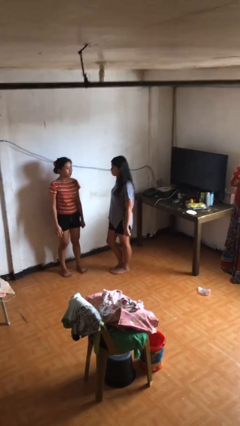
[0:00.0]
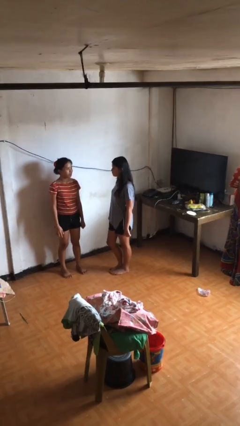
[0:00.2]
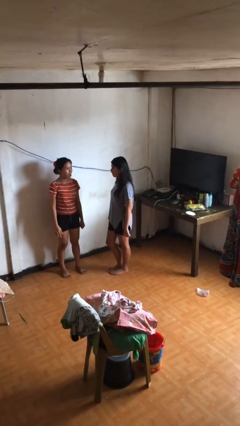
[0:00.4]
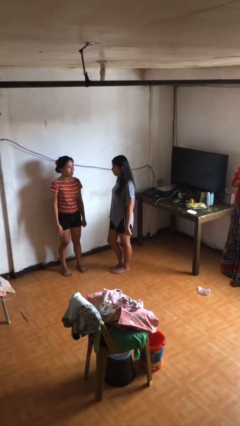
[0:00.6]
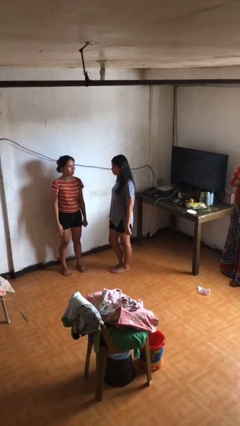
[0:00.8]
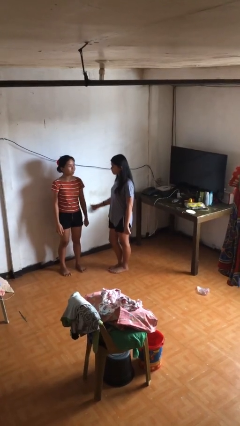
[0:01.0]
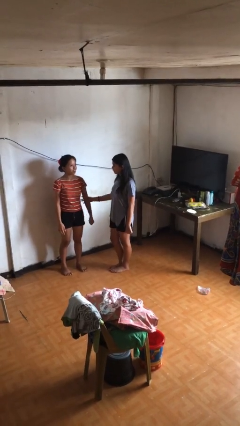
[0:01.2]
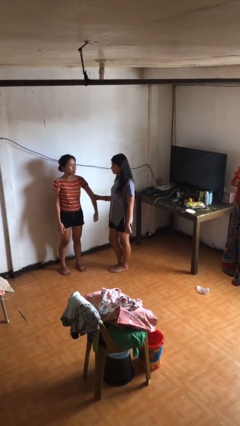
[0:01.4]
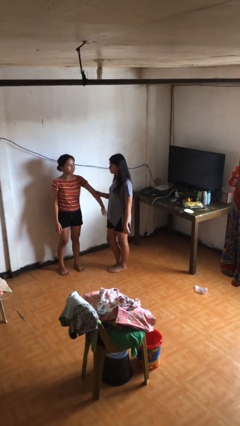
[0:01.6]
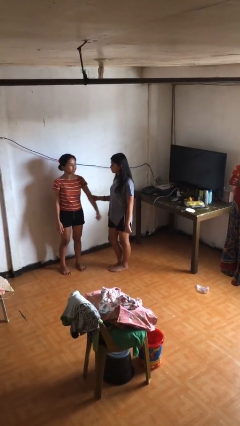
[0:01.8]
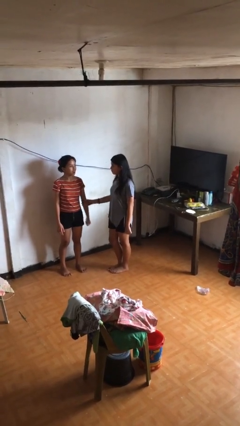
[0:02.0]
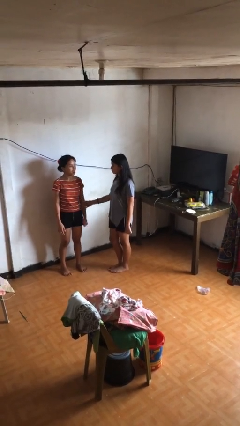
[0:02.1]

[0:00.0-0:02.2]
person grabs person by forearm

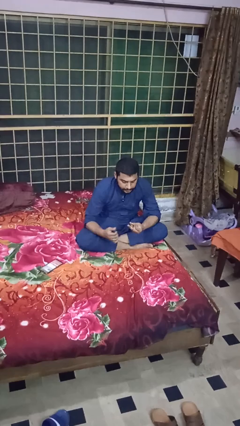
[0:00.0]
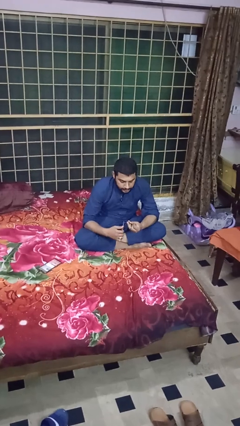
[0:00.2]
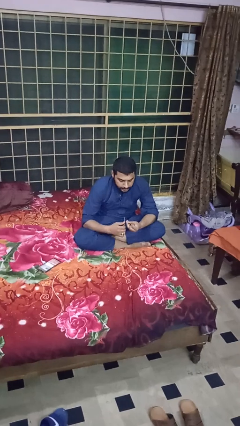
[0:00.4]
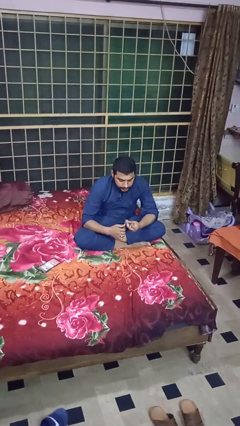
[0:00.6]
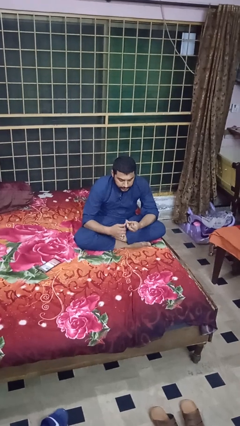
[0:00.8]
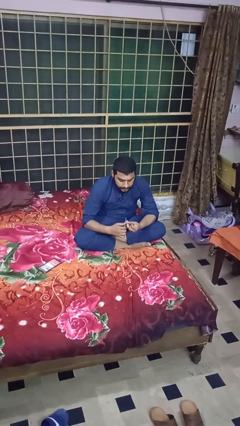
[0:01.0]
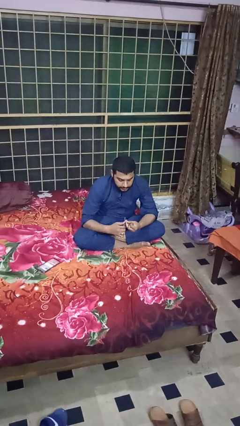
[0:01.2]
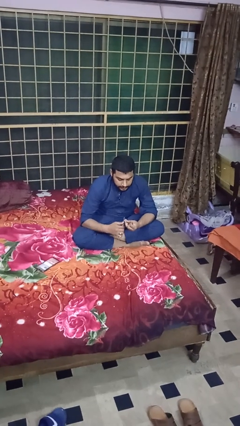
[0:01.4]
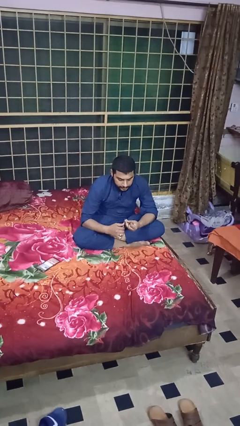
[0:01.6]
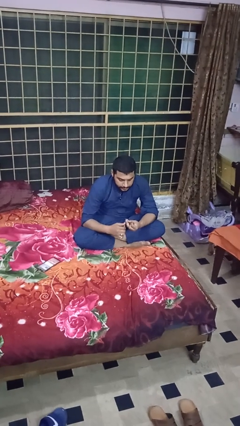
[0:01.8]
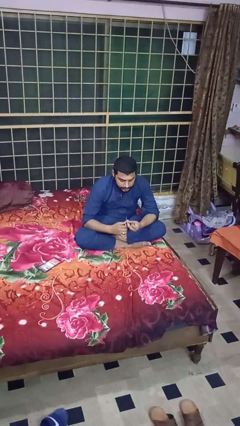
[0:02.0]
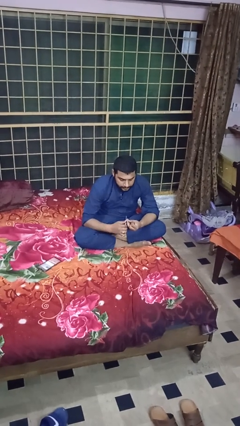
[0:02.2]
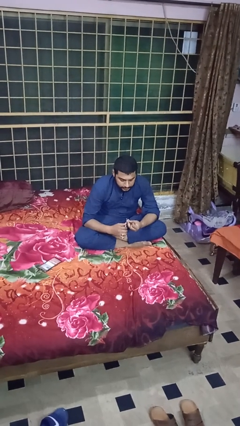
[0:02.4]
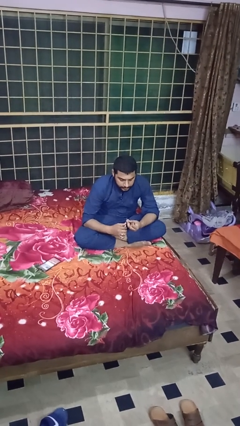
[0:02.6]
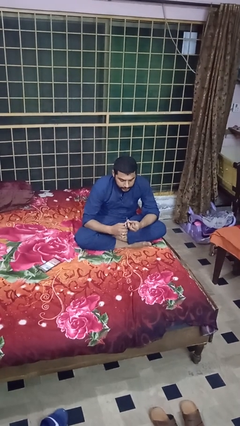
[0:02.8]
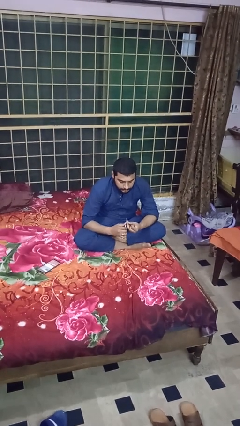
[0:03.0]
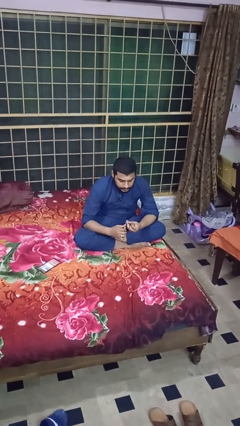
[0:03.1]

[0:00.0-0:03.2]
person files fingernails

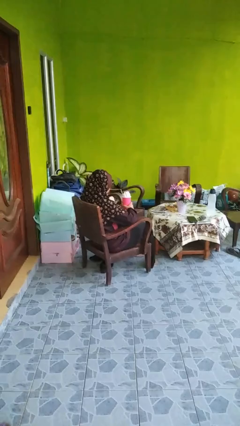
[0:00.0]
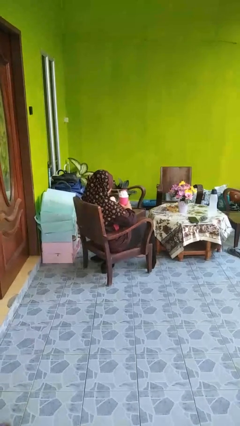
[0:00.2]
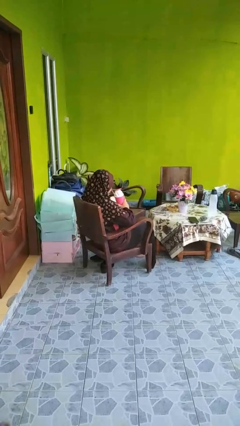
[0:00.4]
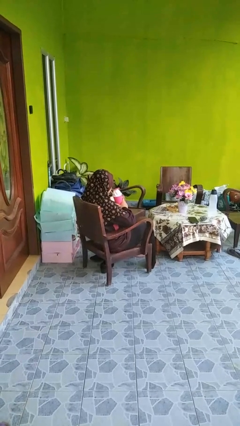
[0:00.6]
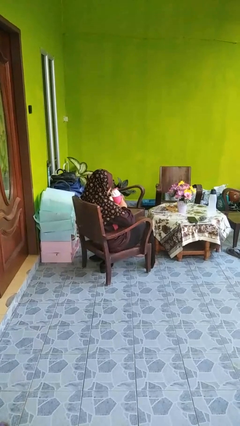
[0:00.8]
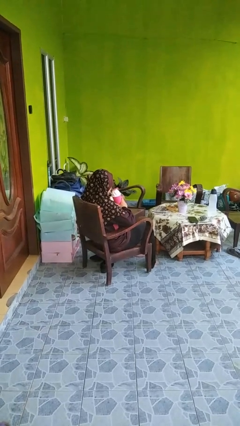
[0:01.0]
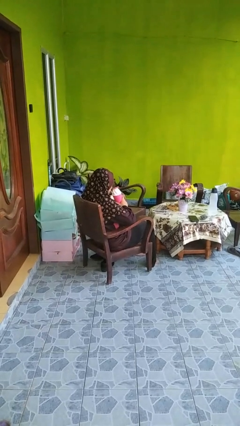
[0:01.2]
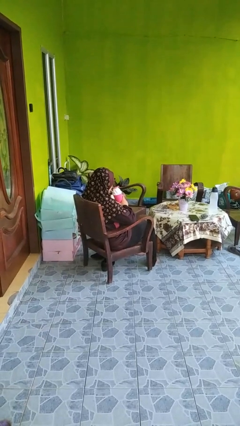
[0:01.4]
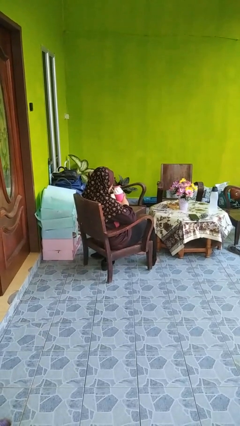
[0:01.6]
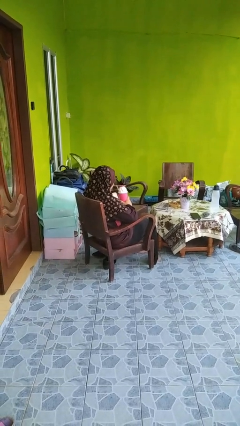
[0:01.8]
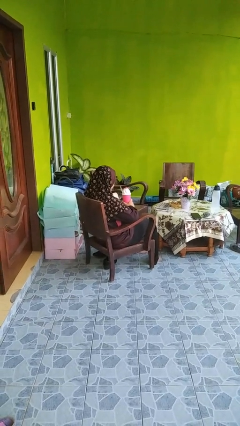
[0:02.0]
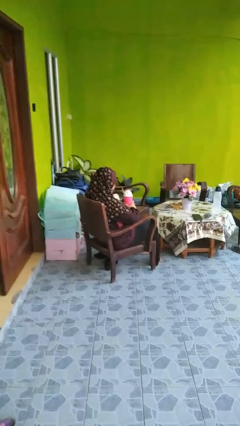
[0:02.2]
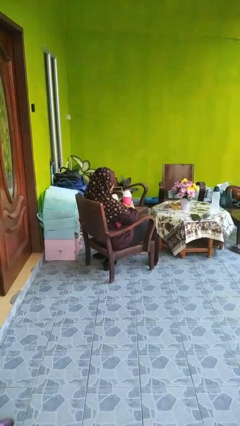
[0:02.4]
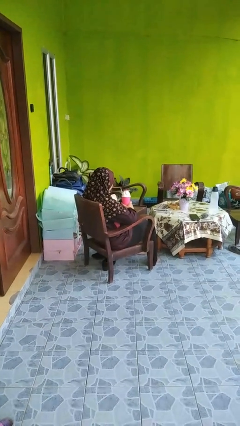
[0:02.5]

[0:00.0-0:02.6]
person drinks from straw

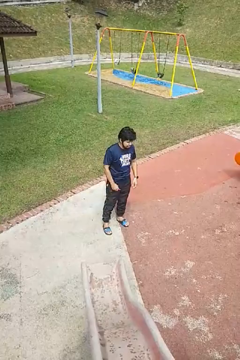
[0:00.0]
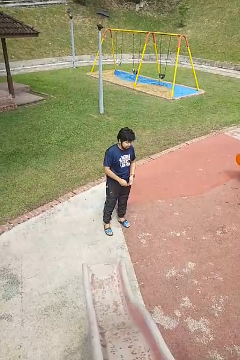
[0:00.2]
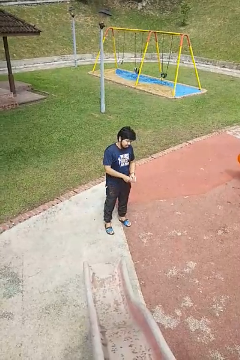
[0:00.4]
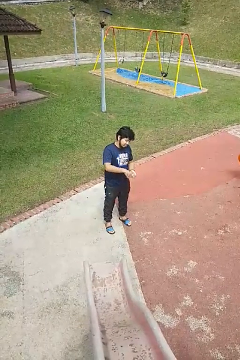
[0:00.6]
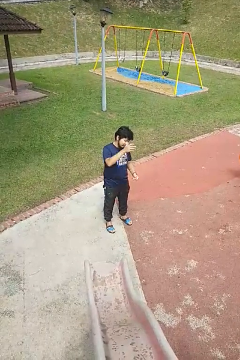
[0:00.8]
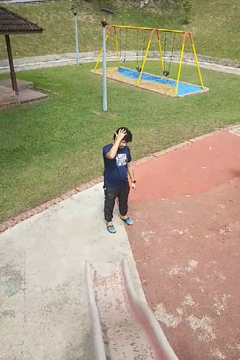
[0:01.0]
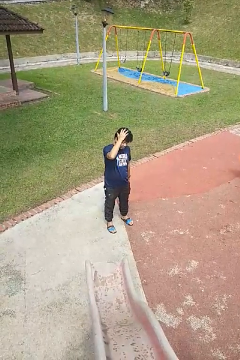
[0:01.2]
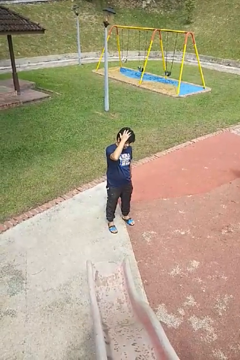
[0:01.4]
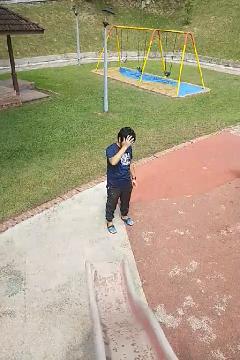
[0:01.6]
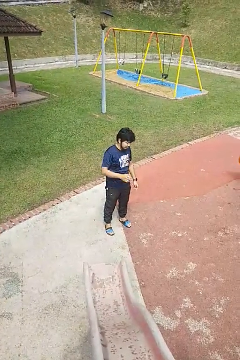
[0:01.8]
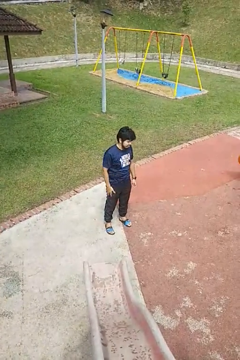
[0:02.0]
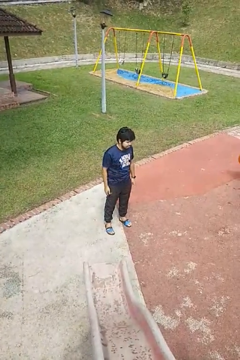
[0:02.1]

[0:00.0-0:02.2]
person pats head

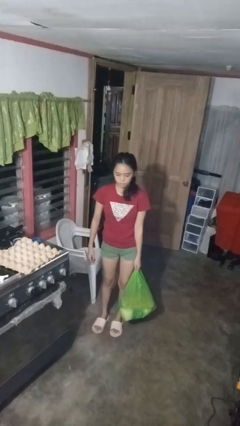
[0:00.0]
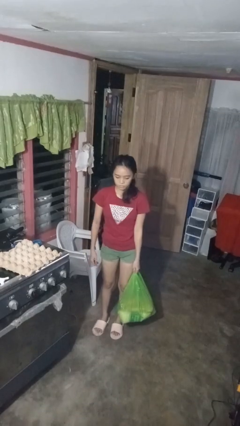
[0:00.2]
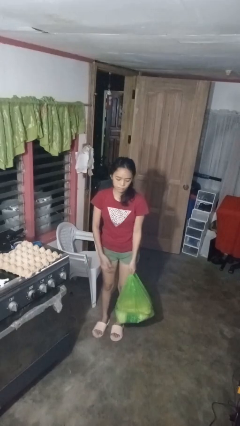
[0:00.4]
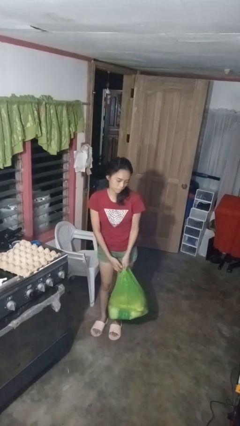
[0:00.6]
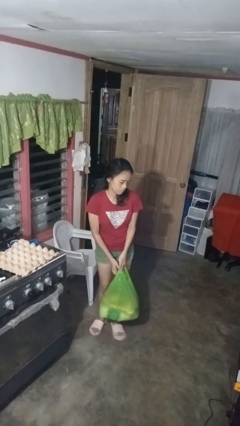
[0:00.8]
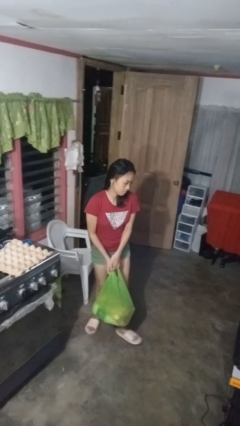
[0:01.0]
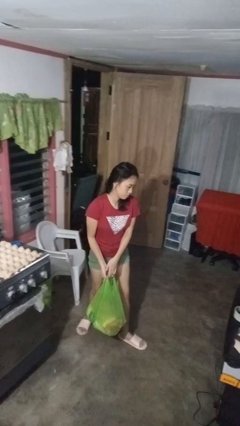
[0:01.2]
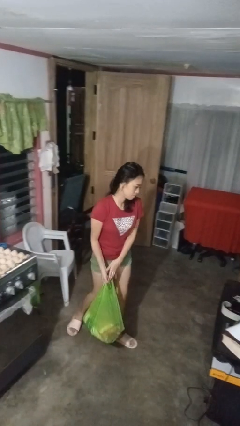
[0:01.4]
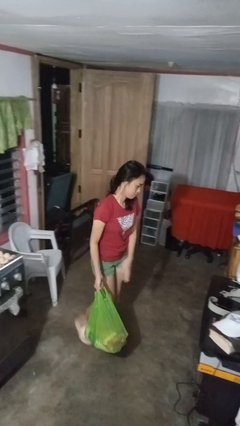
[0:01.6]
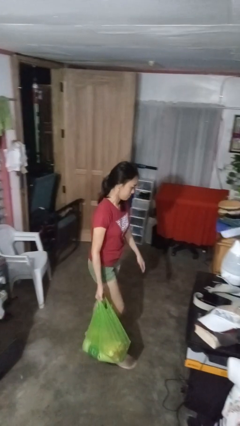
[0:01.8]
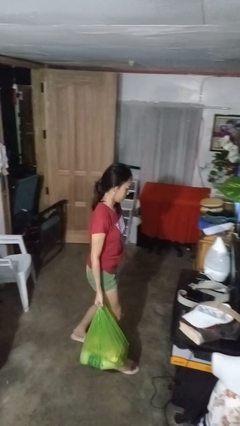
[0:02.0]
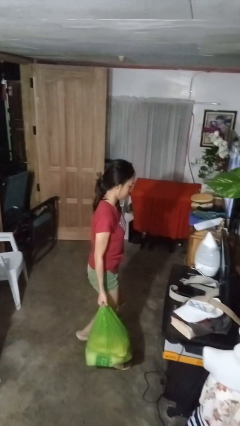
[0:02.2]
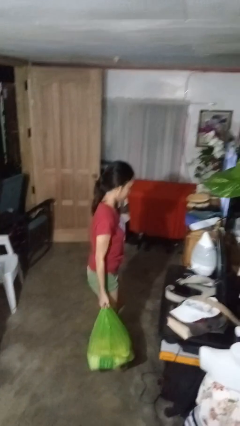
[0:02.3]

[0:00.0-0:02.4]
person carries groceries

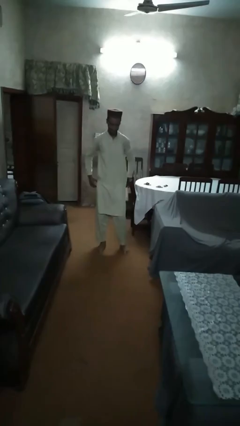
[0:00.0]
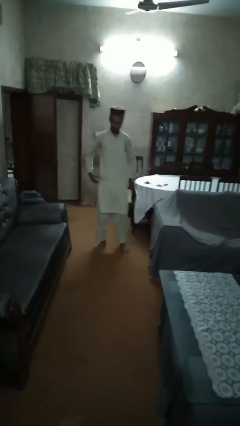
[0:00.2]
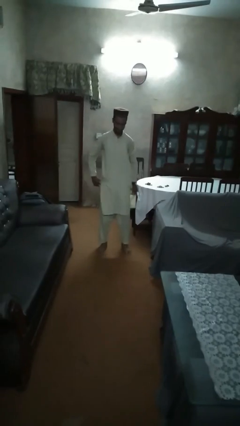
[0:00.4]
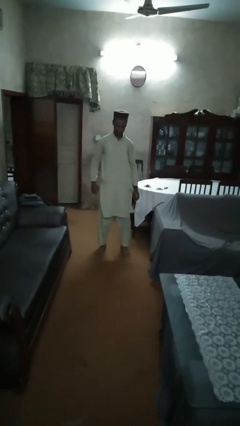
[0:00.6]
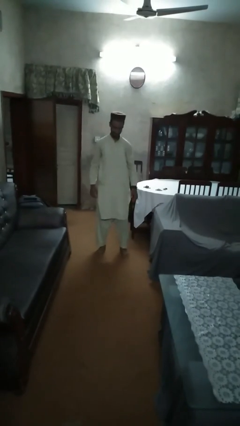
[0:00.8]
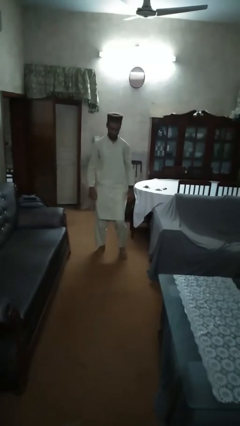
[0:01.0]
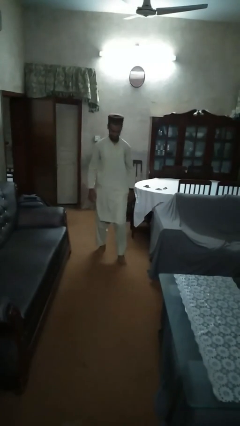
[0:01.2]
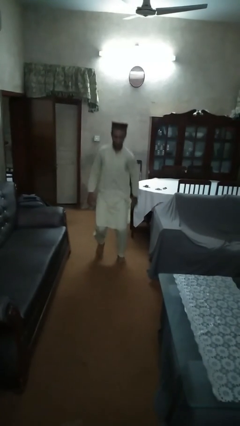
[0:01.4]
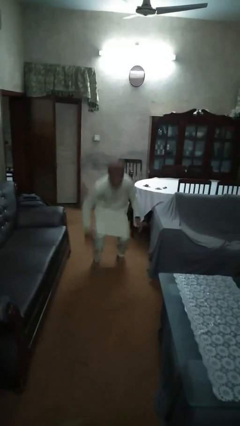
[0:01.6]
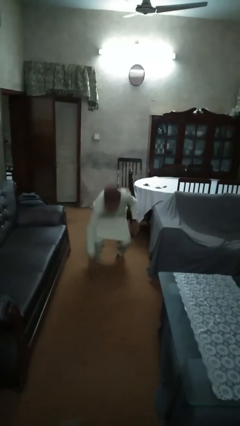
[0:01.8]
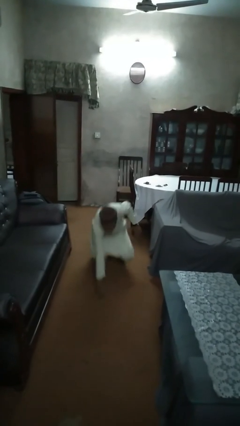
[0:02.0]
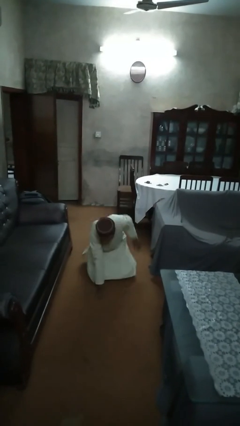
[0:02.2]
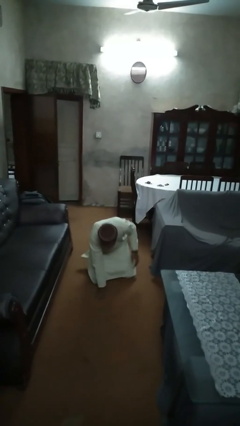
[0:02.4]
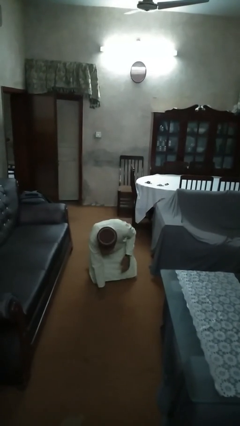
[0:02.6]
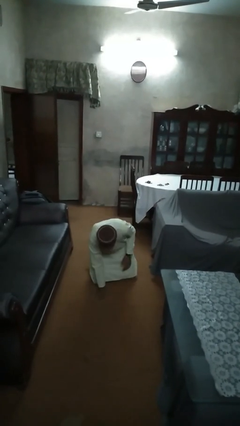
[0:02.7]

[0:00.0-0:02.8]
person trips on object on floor

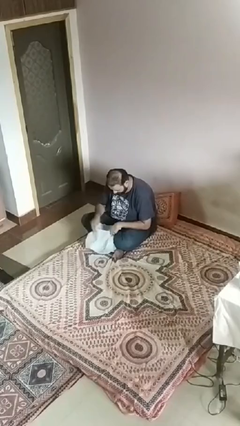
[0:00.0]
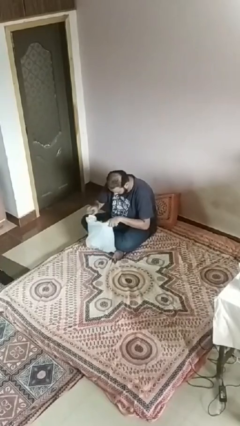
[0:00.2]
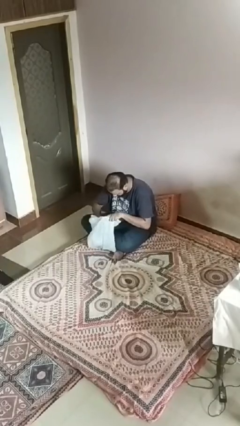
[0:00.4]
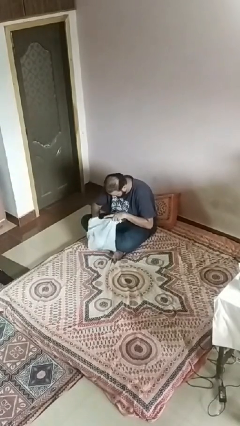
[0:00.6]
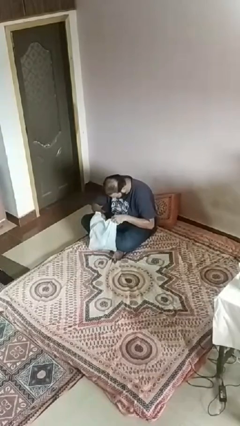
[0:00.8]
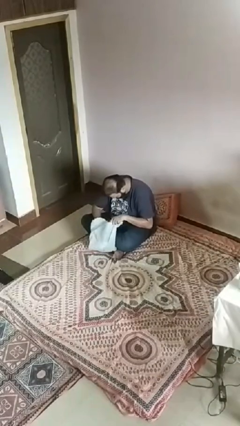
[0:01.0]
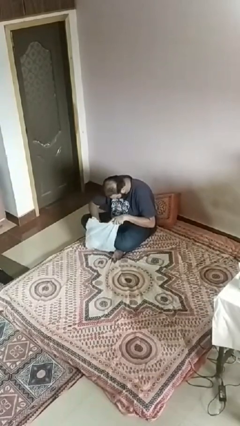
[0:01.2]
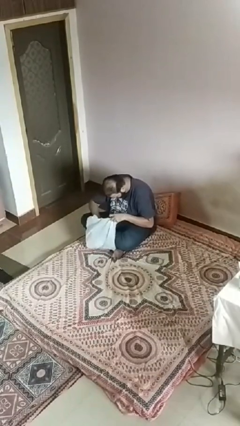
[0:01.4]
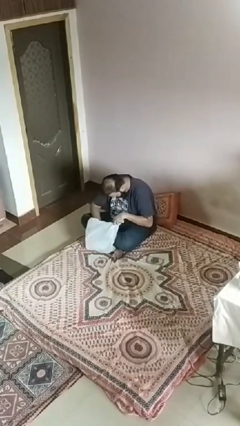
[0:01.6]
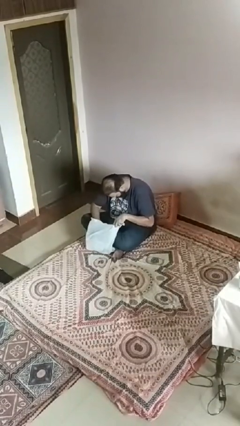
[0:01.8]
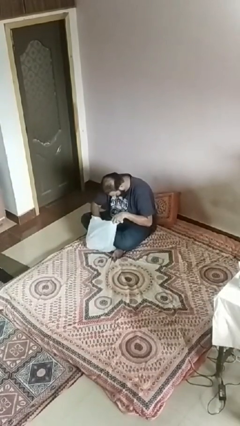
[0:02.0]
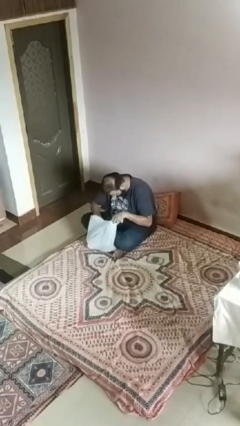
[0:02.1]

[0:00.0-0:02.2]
person searches in bag
